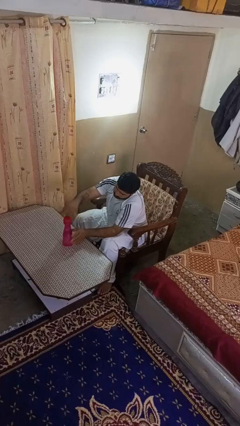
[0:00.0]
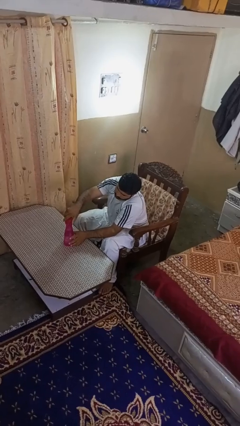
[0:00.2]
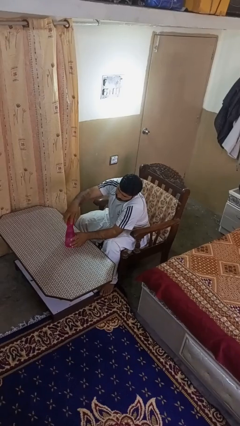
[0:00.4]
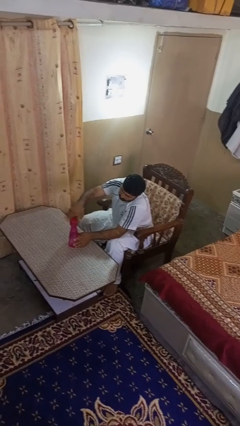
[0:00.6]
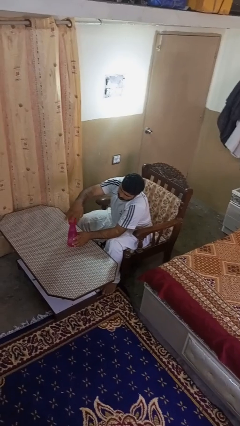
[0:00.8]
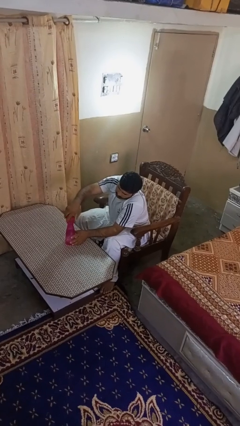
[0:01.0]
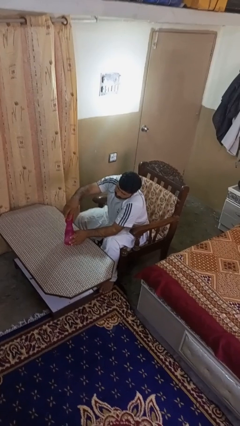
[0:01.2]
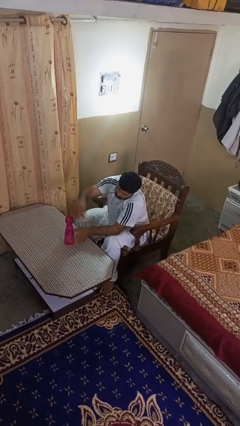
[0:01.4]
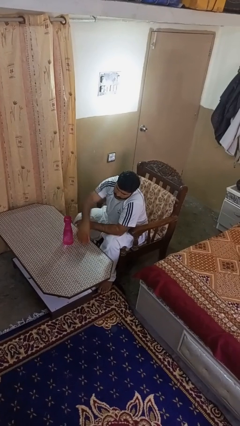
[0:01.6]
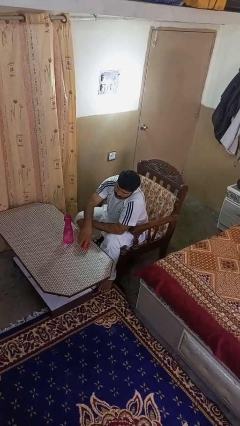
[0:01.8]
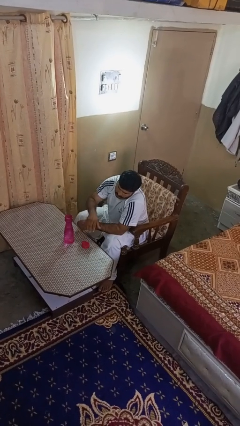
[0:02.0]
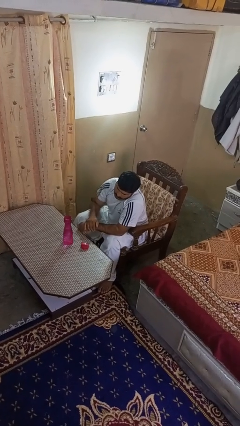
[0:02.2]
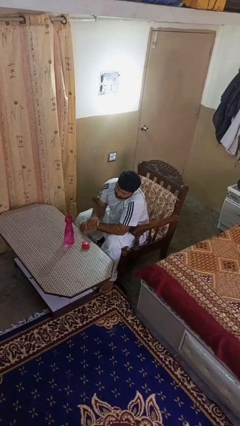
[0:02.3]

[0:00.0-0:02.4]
person unscrews lid from bottle

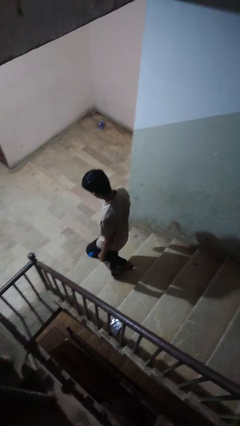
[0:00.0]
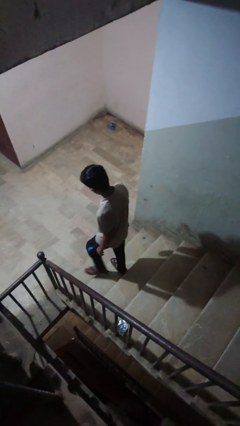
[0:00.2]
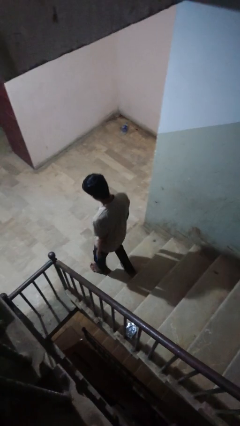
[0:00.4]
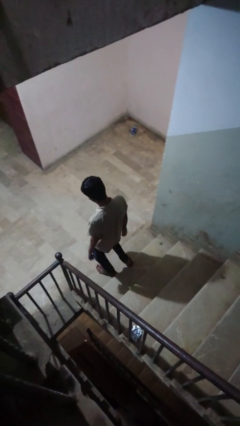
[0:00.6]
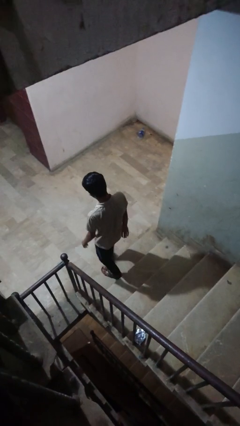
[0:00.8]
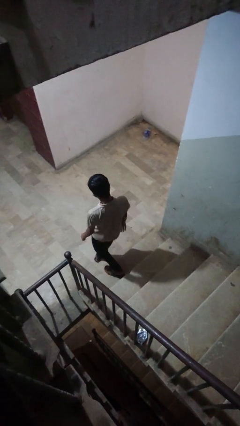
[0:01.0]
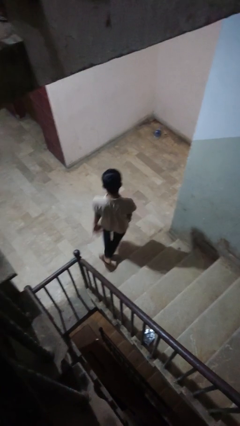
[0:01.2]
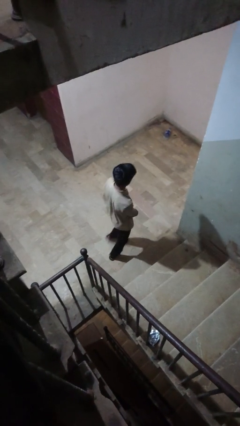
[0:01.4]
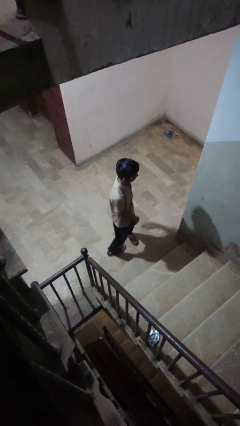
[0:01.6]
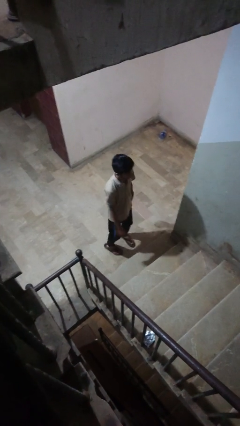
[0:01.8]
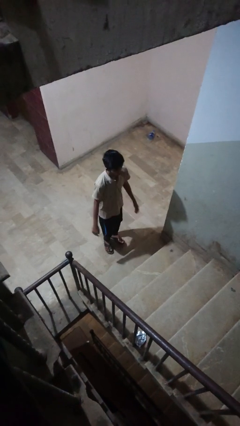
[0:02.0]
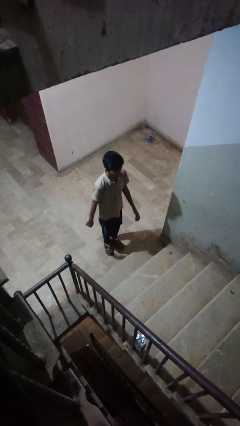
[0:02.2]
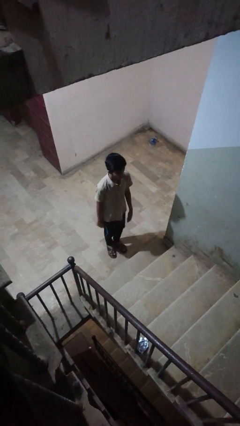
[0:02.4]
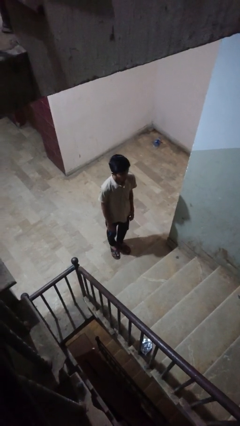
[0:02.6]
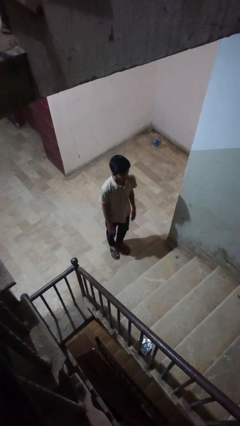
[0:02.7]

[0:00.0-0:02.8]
person climbs down stairs

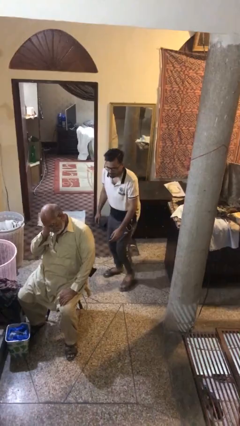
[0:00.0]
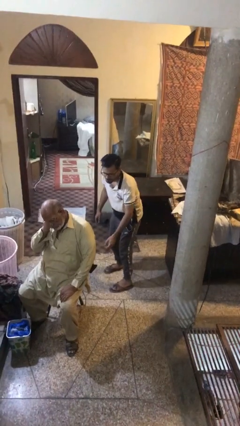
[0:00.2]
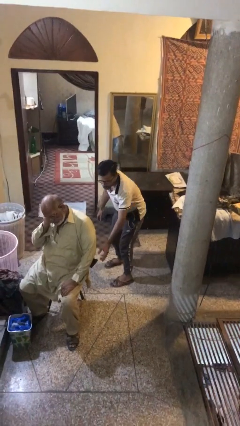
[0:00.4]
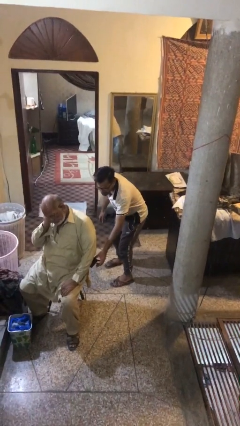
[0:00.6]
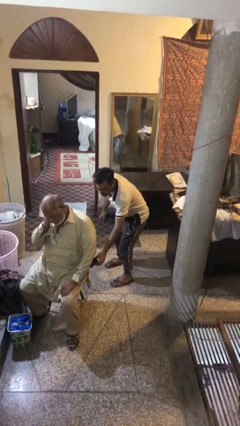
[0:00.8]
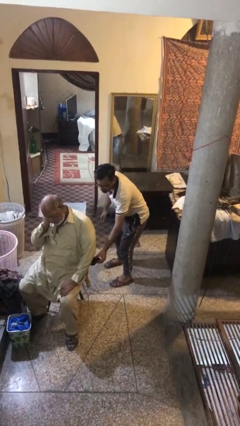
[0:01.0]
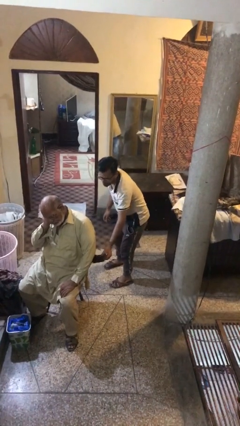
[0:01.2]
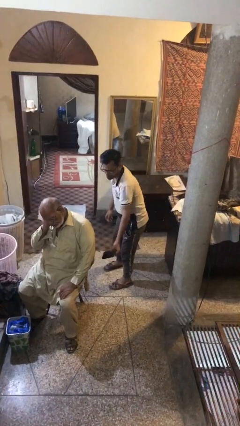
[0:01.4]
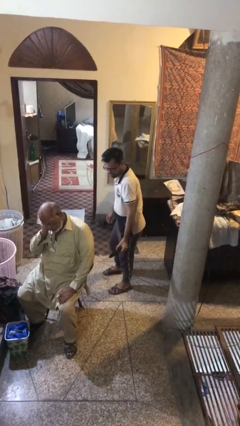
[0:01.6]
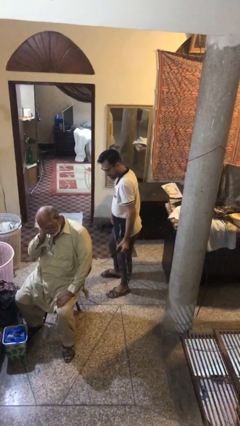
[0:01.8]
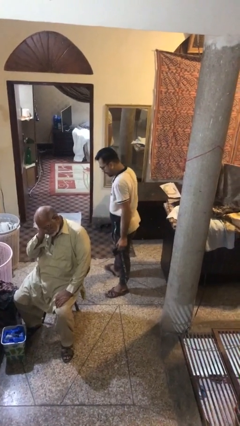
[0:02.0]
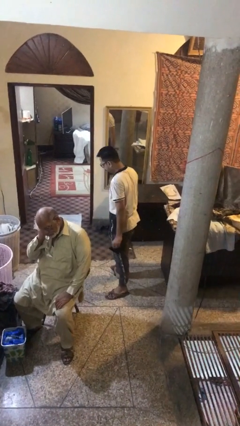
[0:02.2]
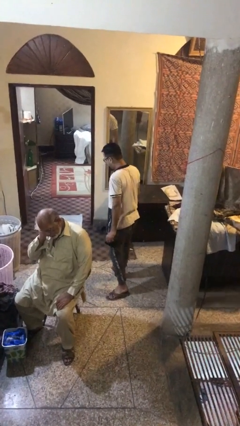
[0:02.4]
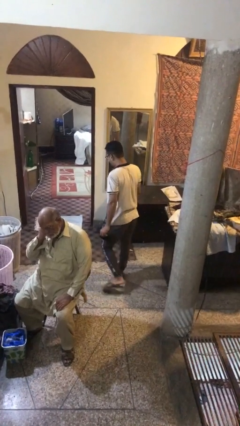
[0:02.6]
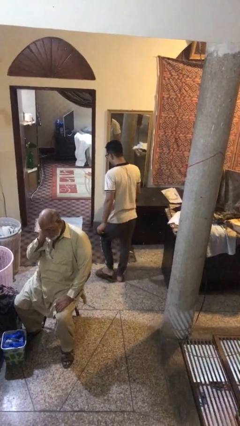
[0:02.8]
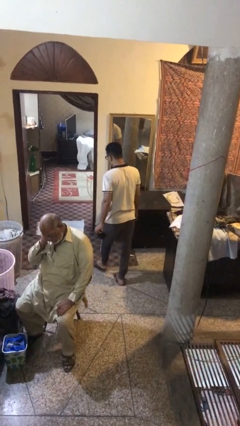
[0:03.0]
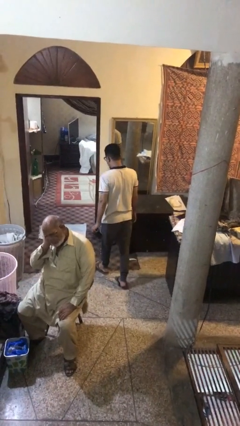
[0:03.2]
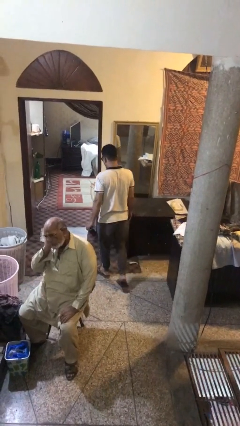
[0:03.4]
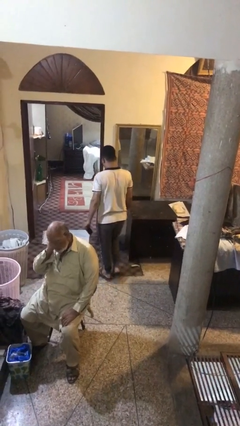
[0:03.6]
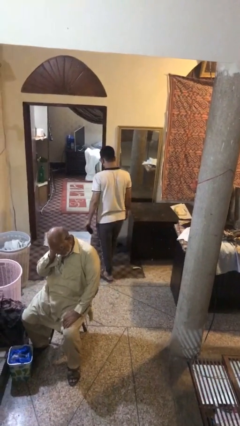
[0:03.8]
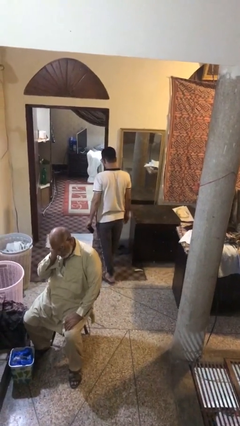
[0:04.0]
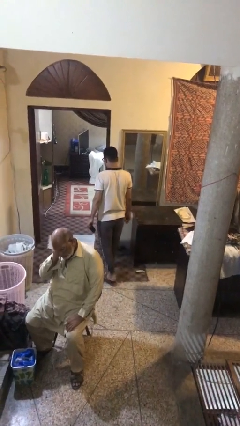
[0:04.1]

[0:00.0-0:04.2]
person steals object from person

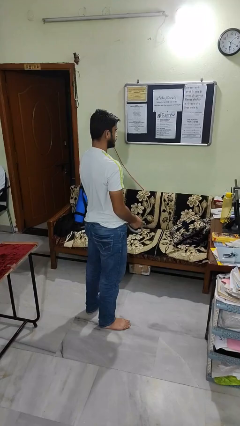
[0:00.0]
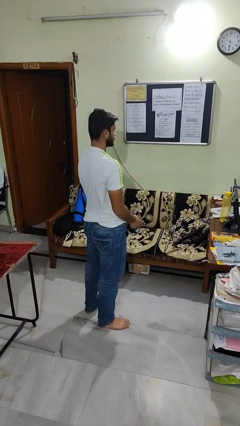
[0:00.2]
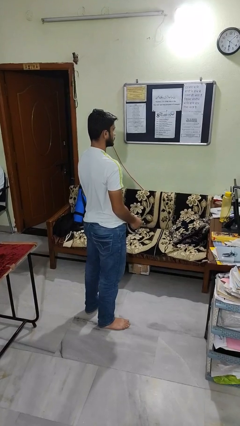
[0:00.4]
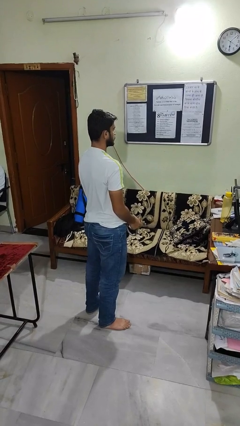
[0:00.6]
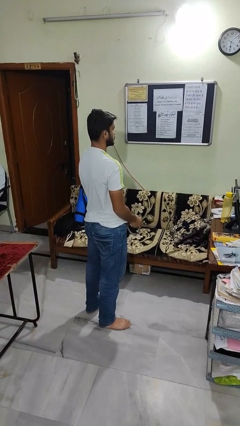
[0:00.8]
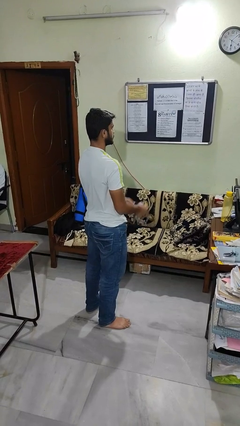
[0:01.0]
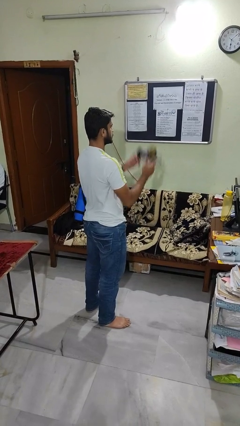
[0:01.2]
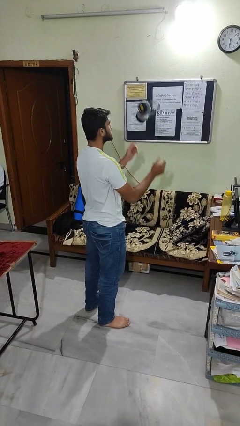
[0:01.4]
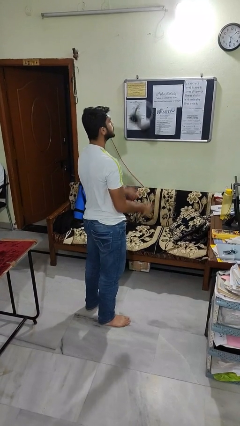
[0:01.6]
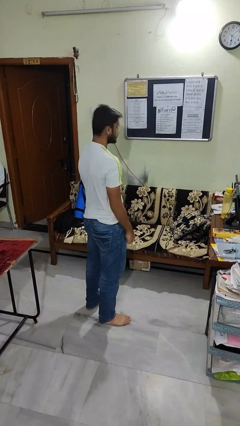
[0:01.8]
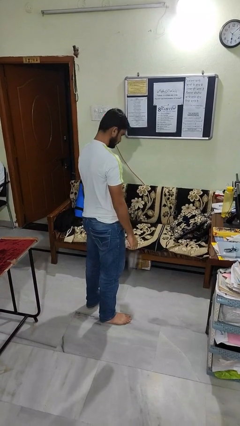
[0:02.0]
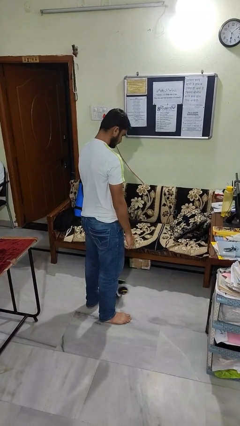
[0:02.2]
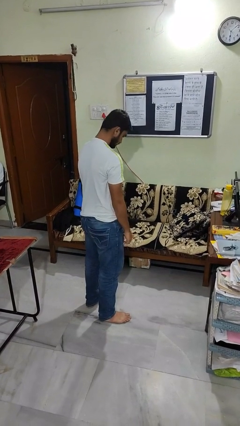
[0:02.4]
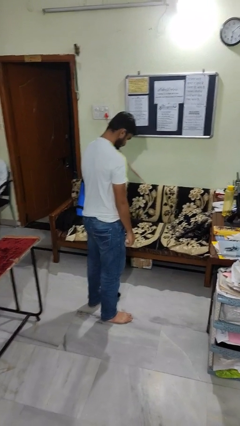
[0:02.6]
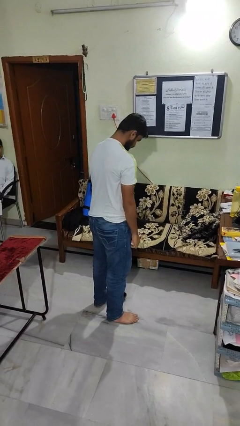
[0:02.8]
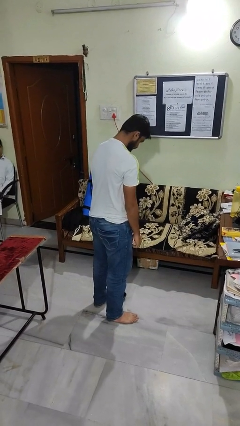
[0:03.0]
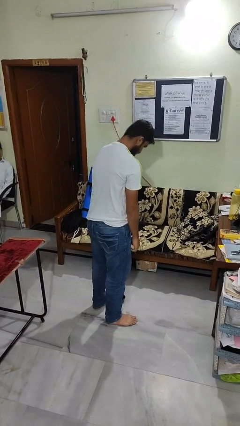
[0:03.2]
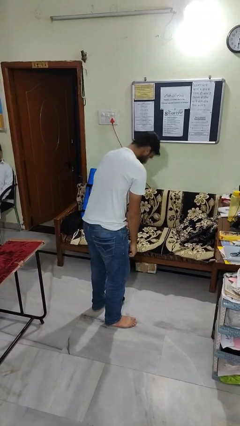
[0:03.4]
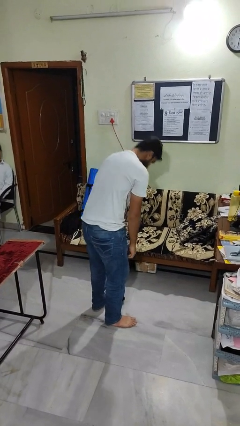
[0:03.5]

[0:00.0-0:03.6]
person throws object into air

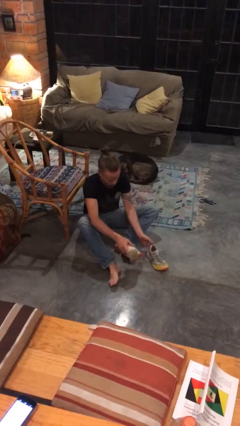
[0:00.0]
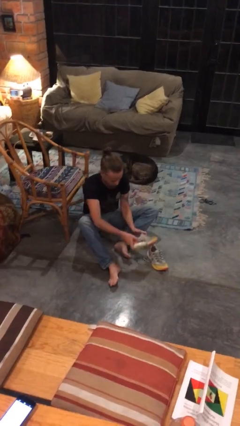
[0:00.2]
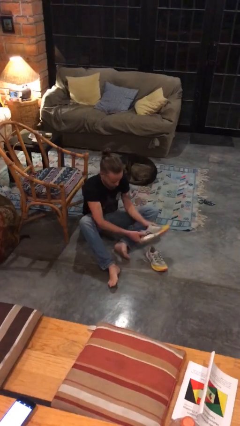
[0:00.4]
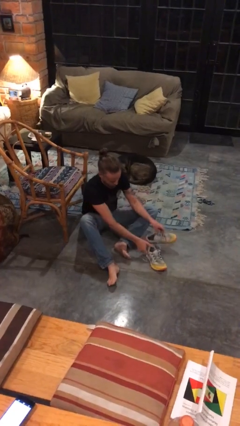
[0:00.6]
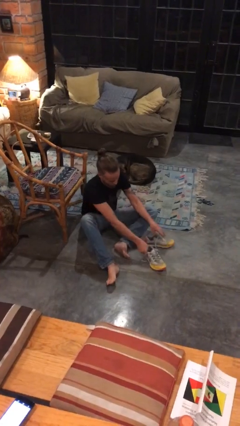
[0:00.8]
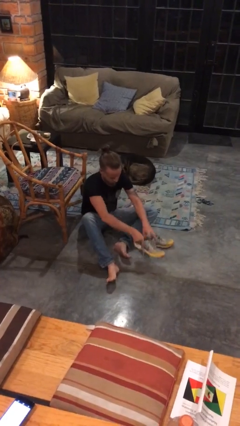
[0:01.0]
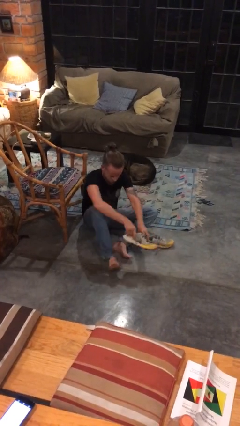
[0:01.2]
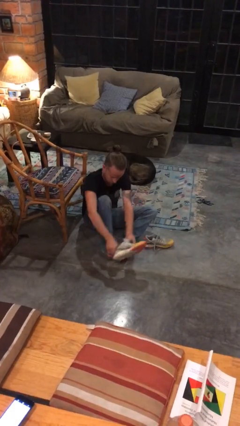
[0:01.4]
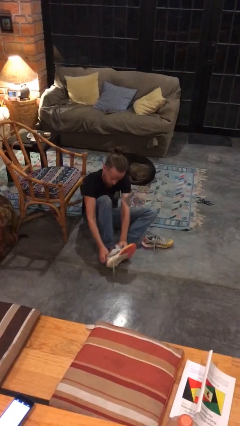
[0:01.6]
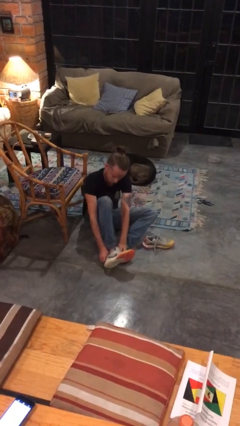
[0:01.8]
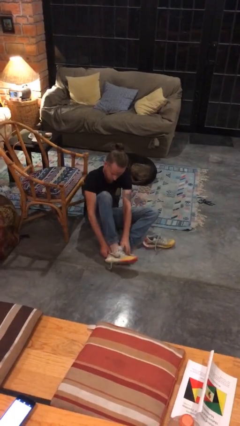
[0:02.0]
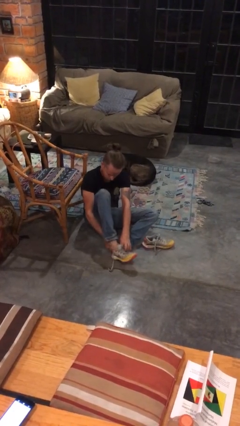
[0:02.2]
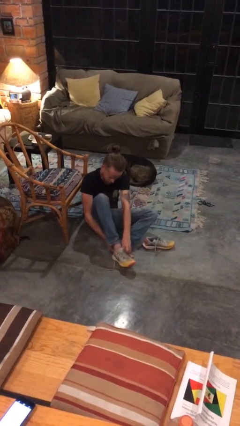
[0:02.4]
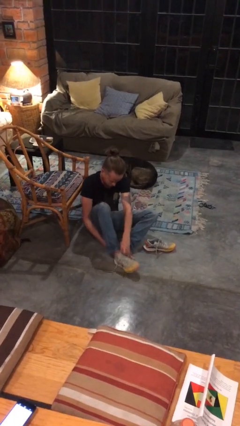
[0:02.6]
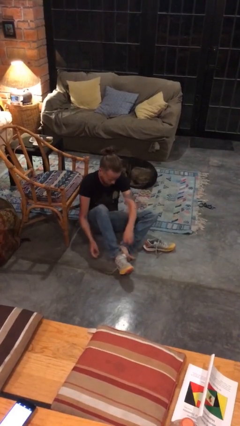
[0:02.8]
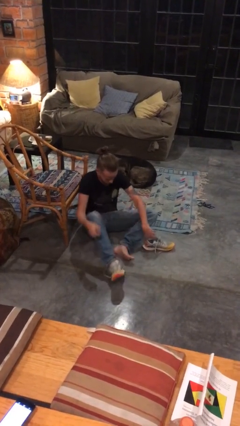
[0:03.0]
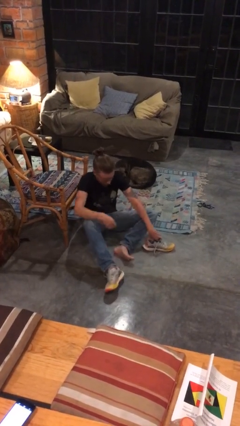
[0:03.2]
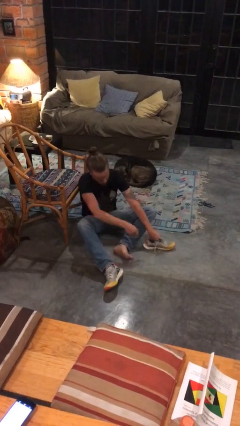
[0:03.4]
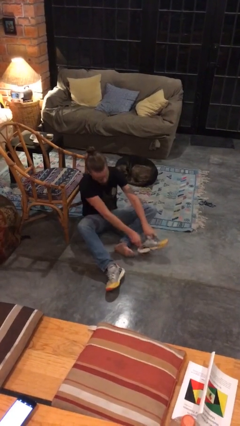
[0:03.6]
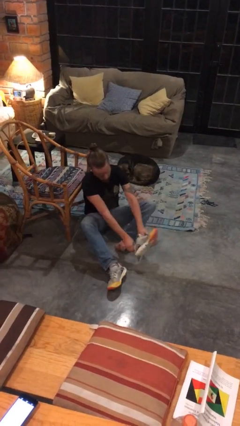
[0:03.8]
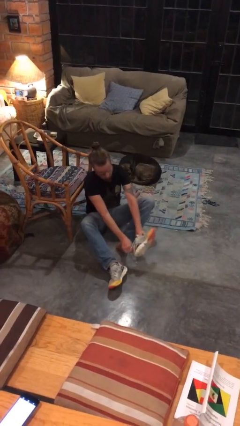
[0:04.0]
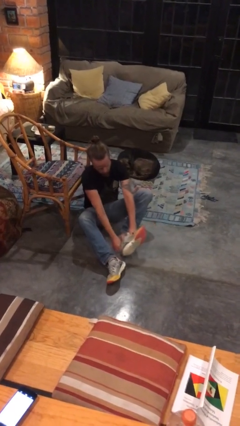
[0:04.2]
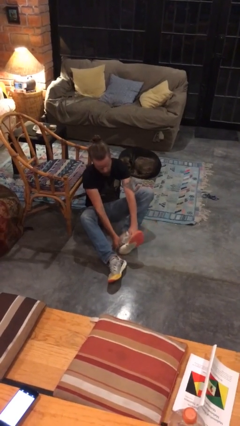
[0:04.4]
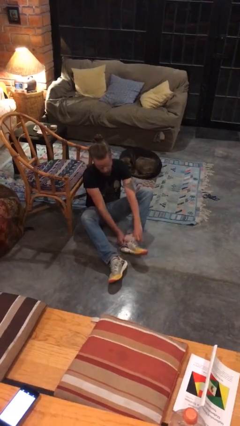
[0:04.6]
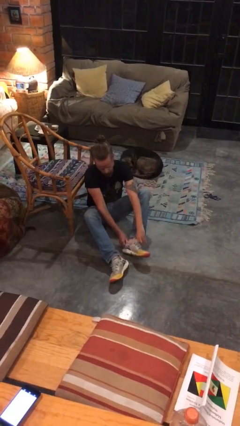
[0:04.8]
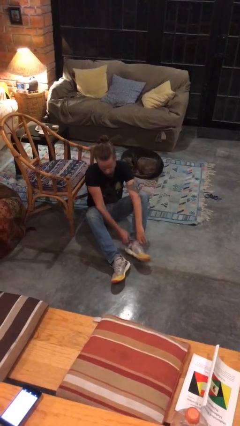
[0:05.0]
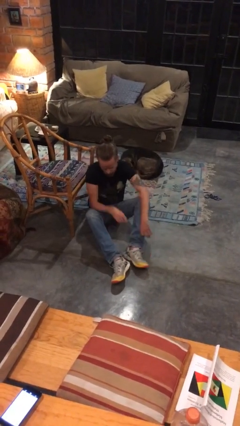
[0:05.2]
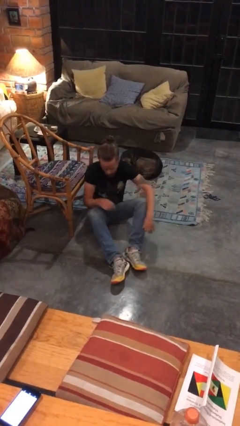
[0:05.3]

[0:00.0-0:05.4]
person puts on shoes
